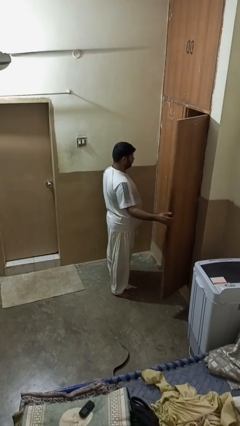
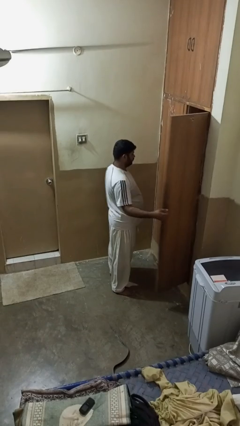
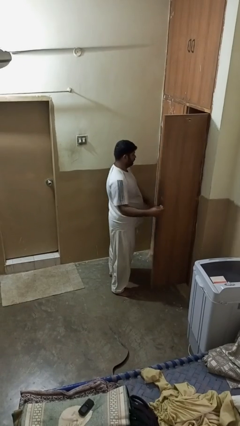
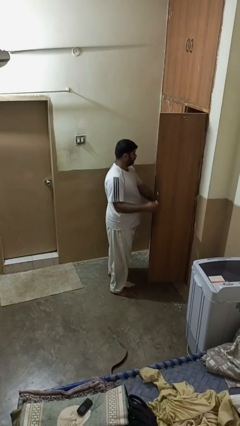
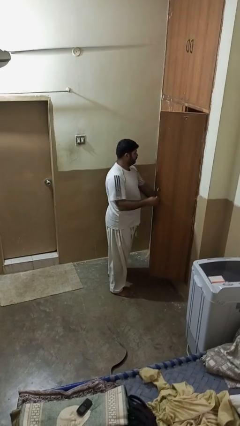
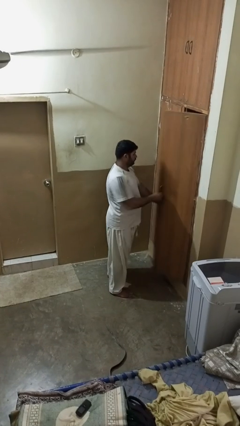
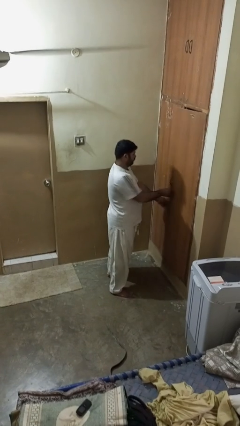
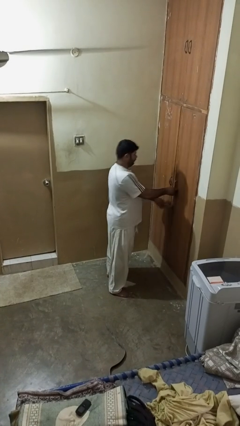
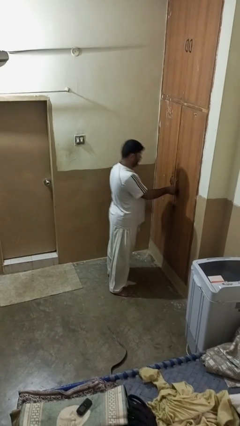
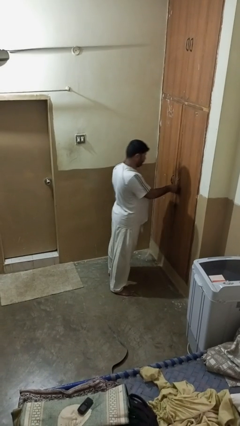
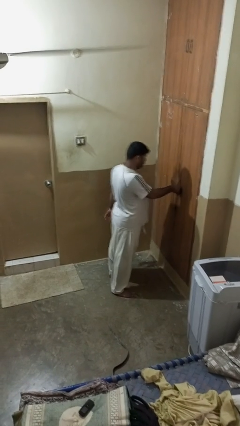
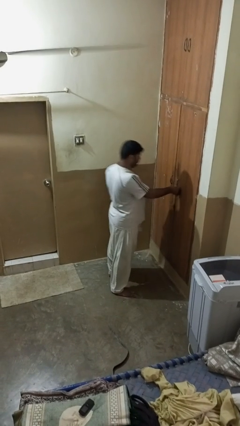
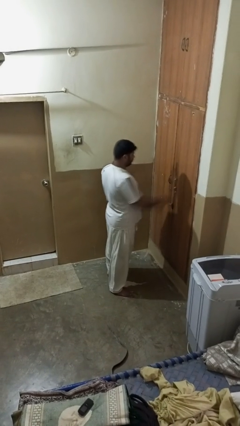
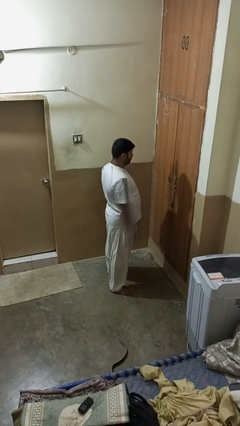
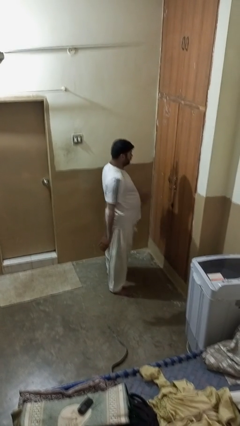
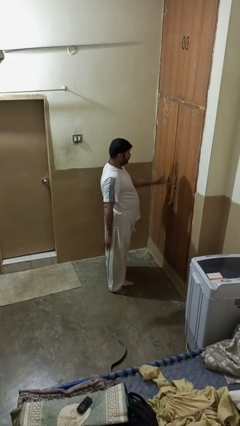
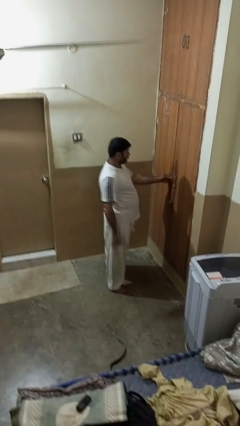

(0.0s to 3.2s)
person closes closet door

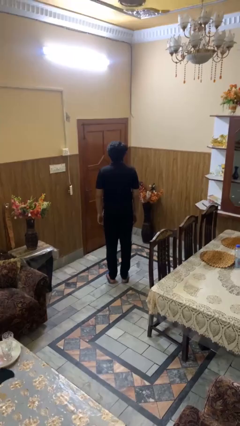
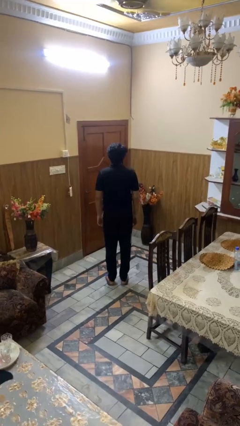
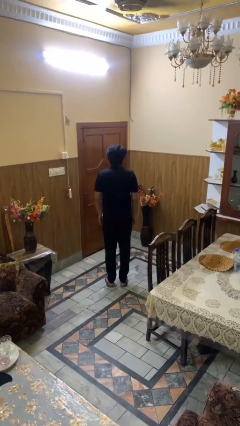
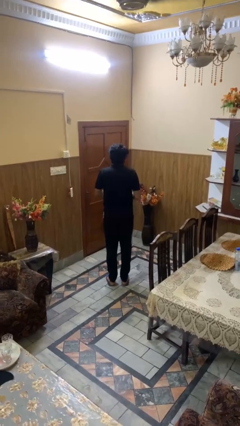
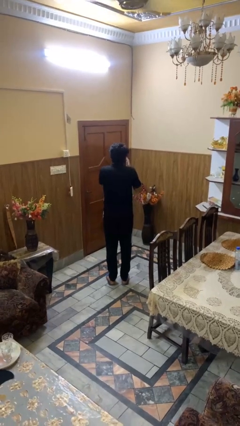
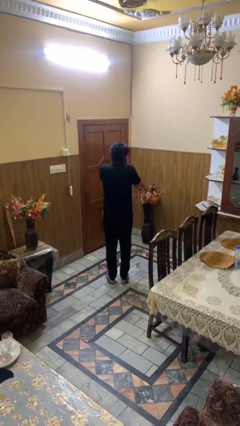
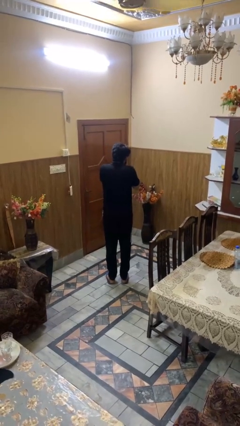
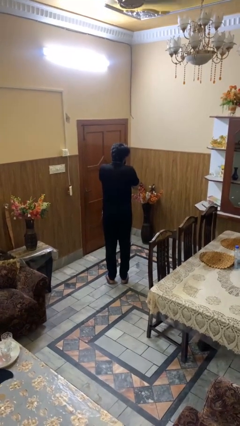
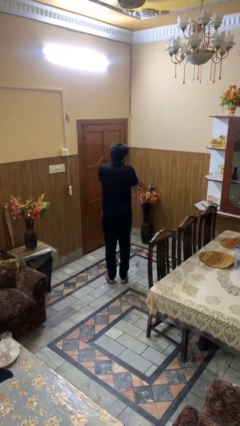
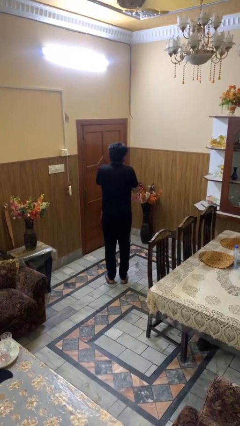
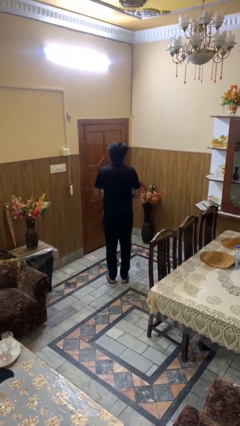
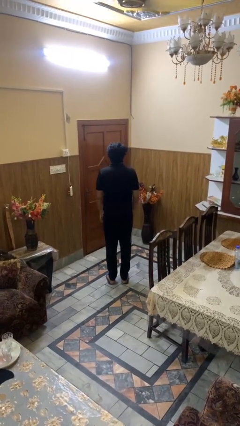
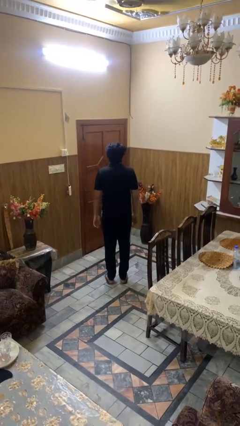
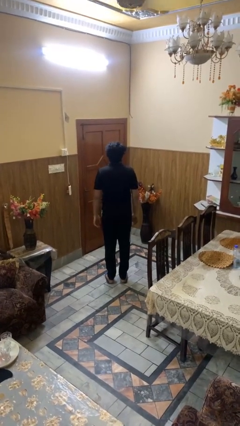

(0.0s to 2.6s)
person sneezes into hand

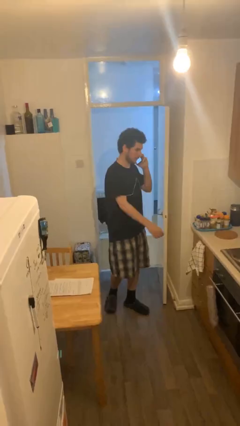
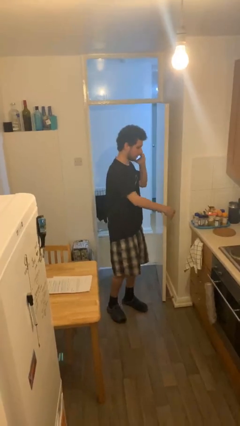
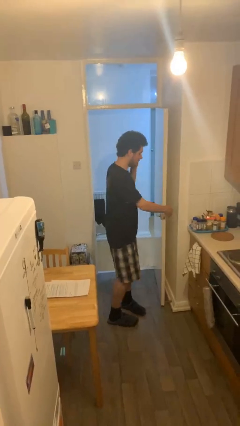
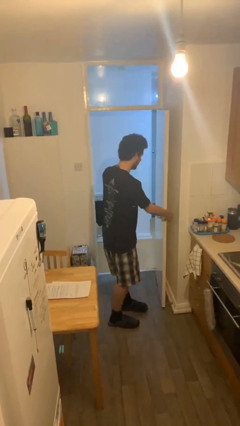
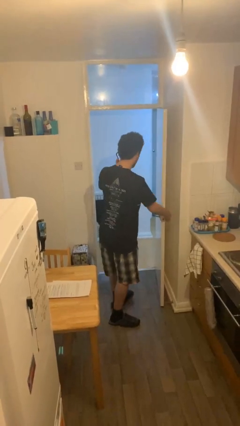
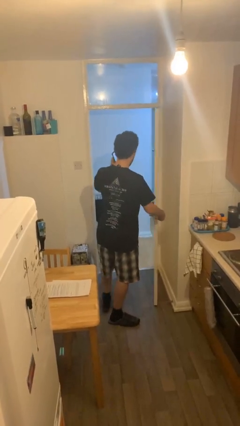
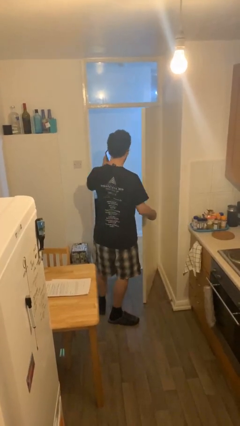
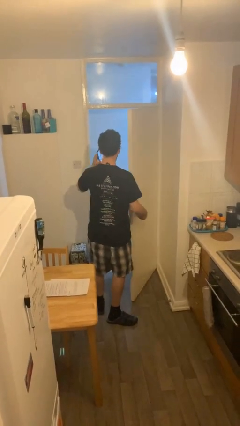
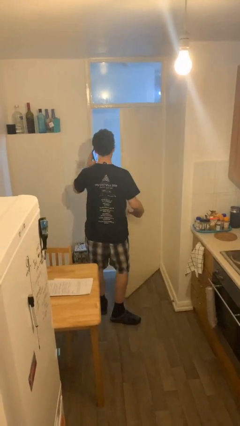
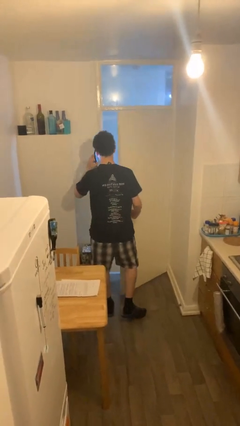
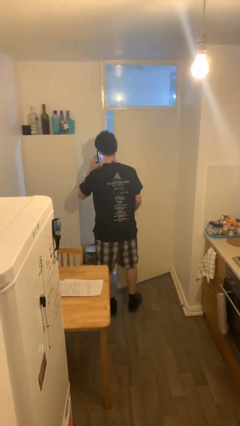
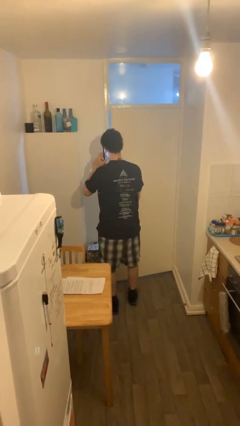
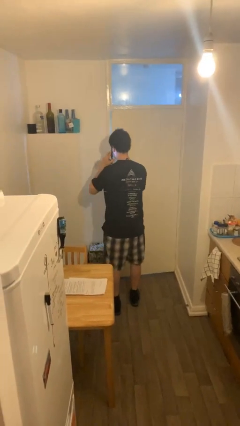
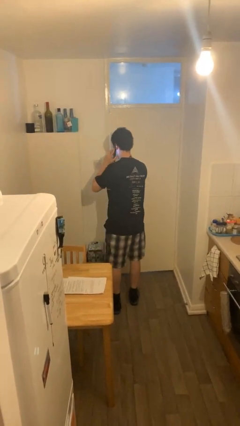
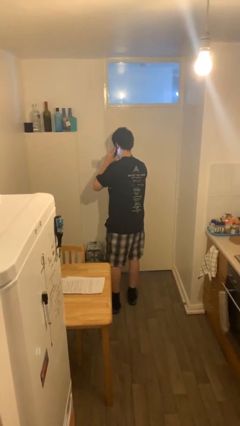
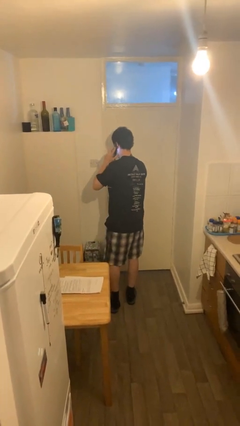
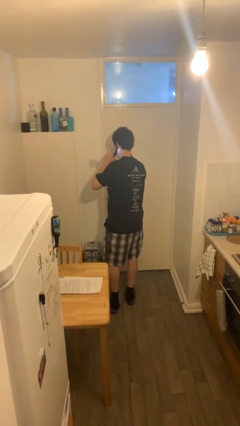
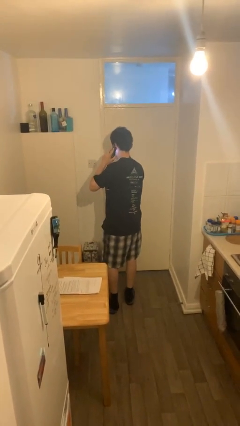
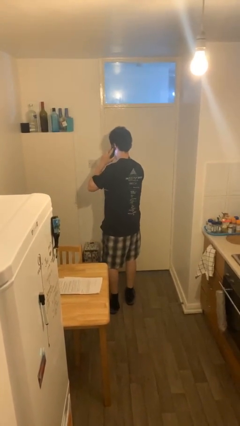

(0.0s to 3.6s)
person closes facility door

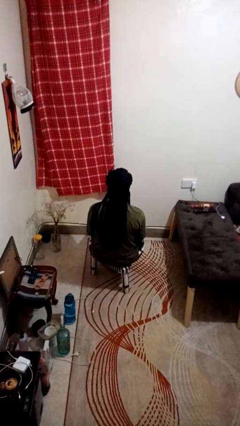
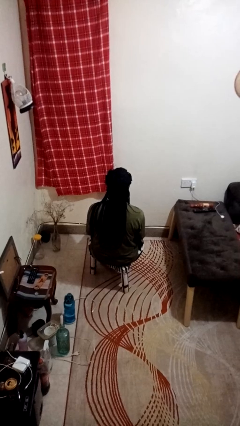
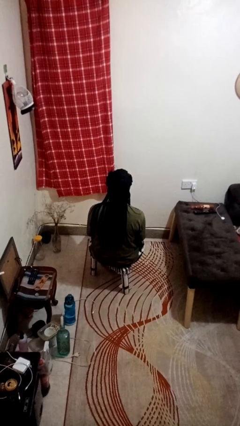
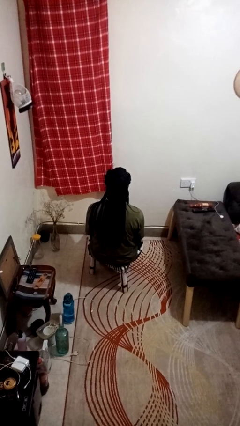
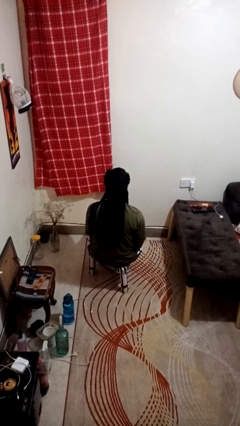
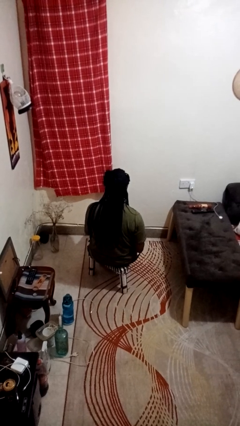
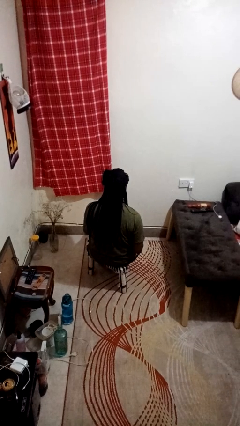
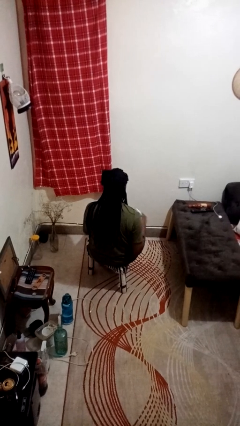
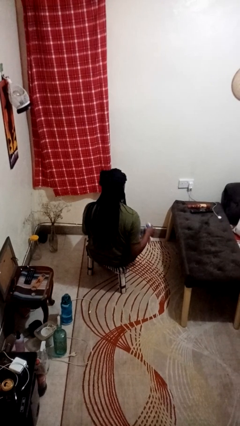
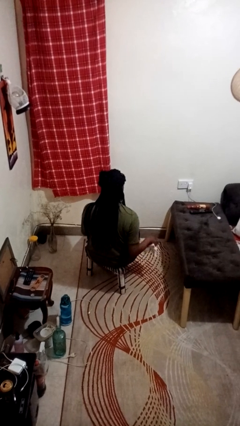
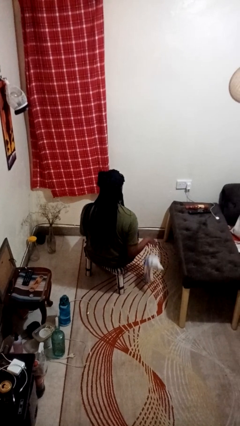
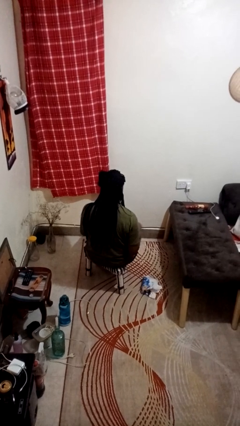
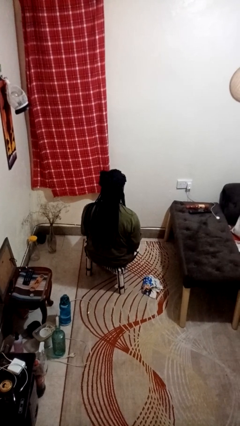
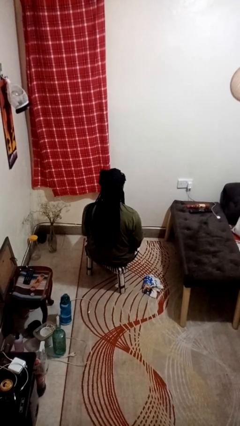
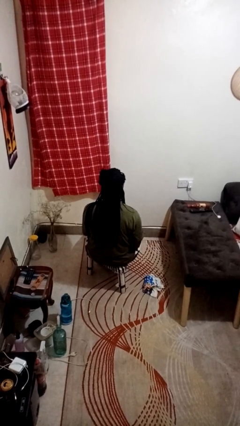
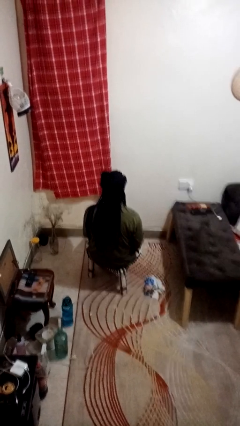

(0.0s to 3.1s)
person throws object to ground

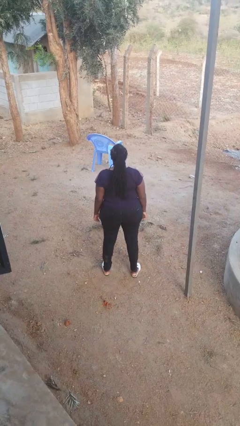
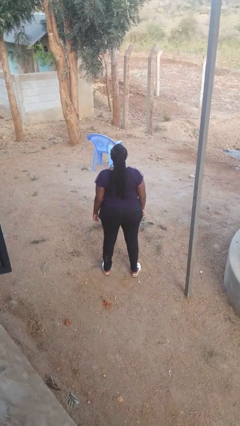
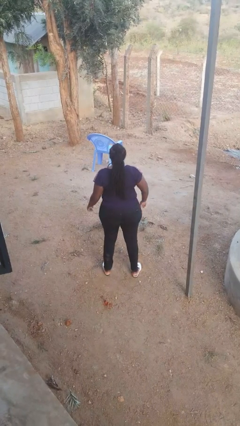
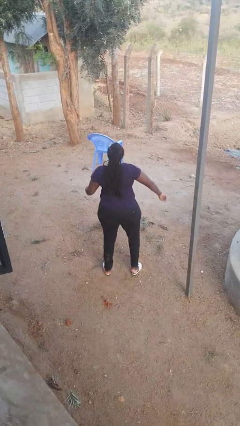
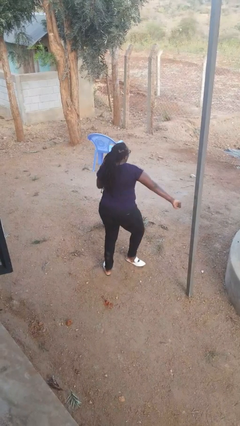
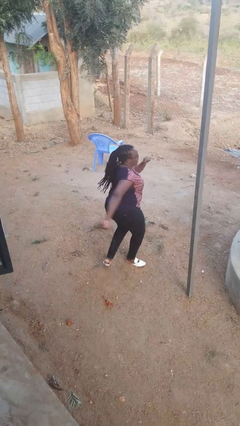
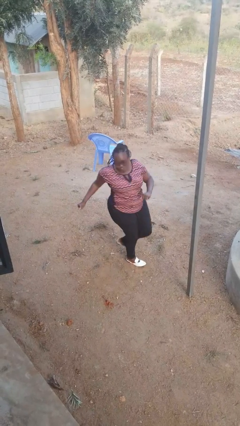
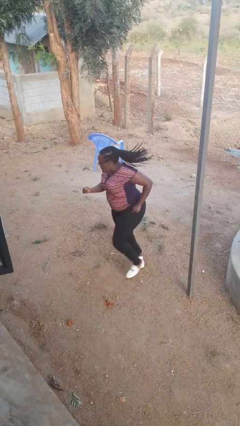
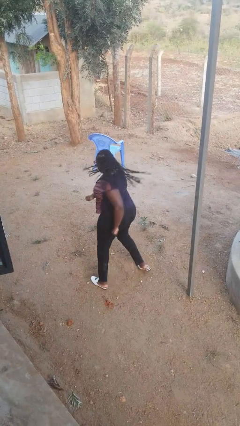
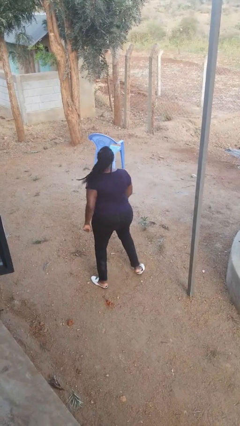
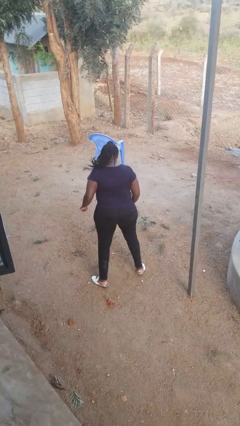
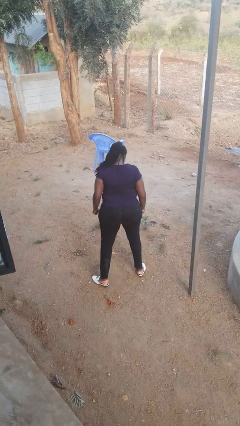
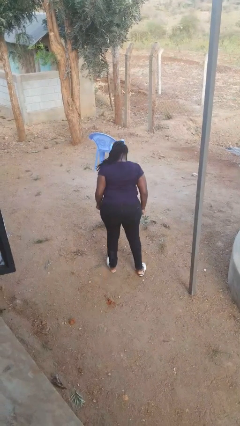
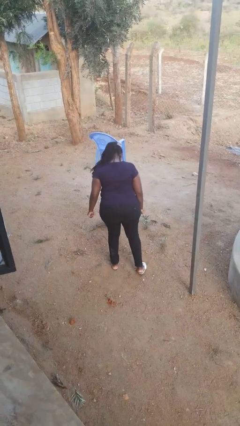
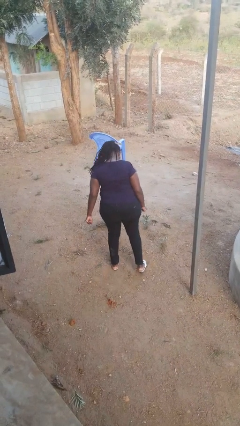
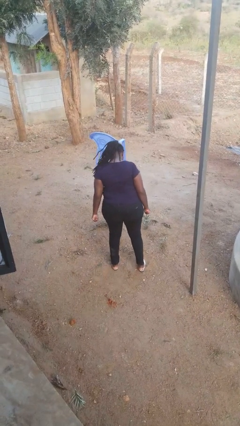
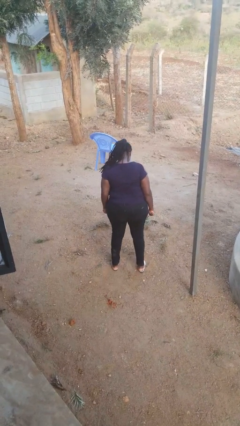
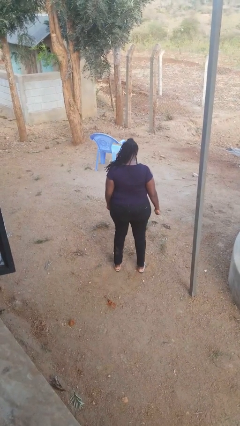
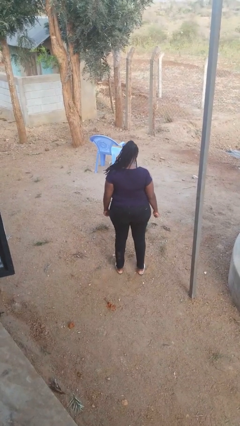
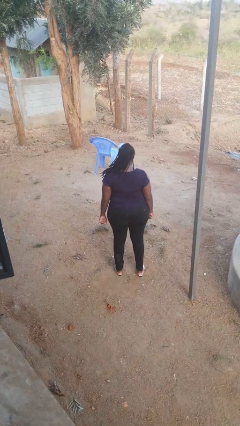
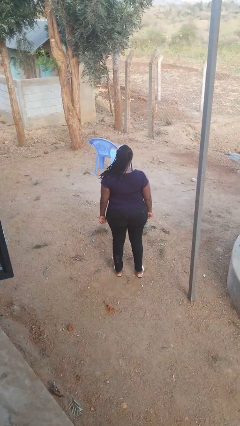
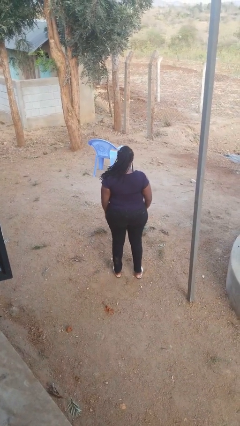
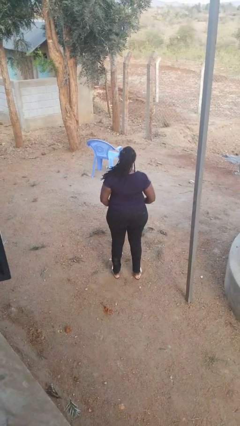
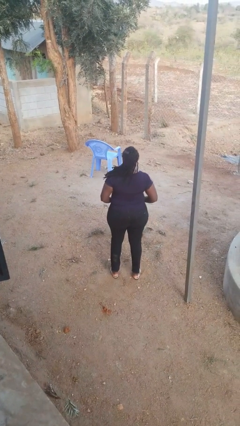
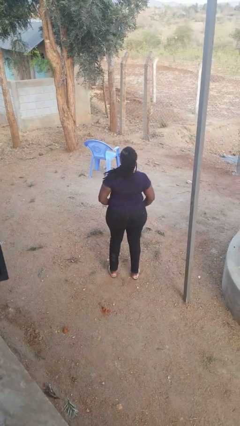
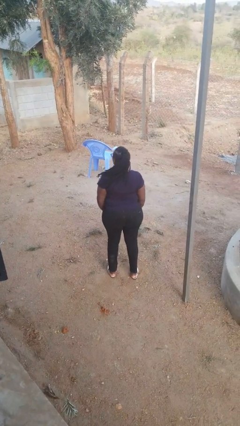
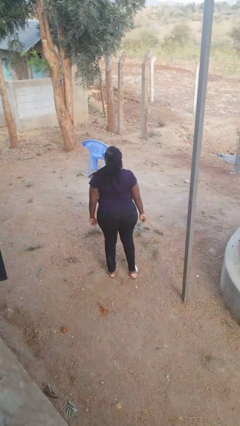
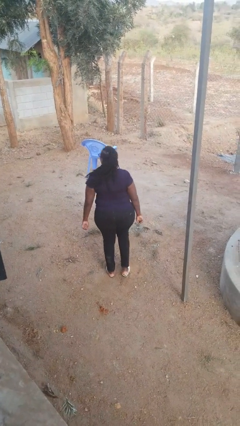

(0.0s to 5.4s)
person twirls
